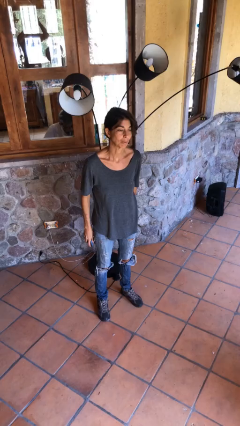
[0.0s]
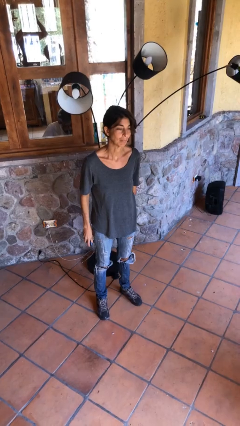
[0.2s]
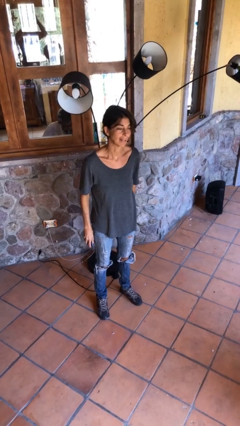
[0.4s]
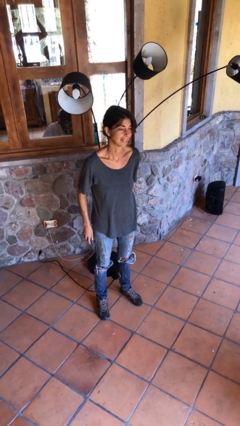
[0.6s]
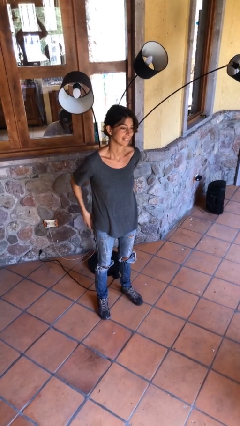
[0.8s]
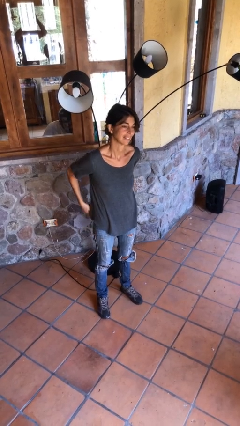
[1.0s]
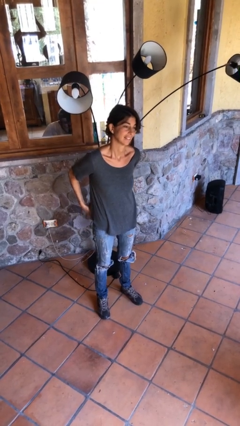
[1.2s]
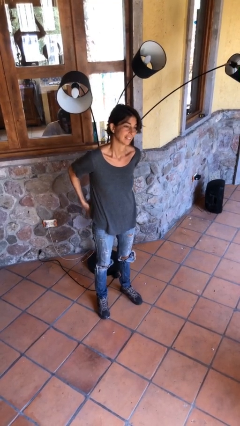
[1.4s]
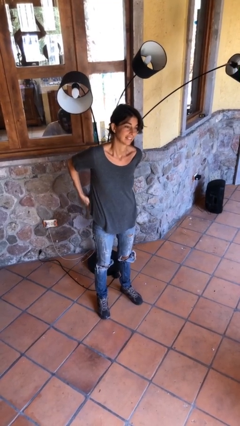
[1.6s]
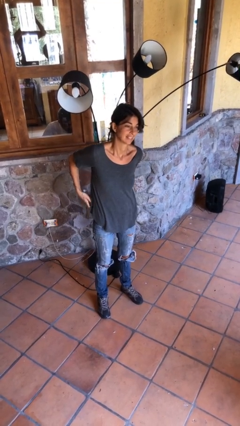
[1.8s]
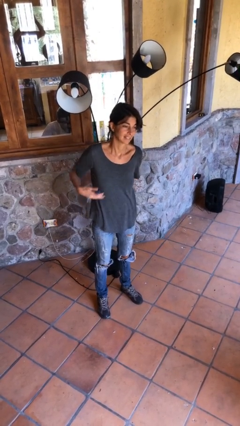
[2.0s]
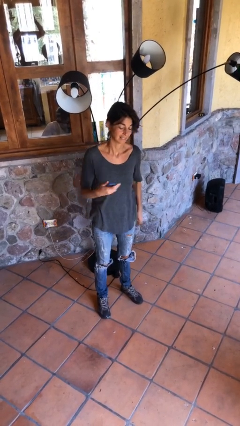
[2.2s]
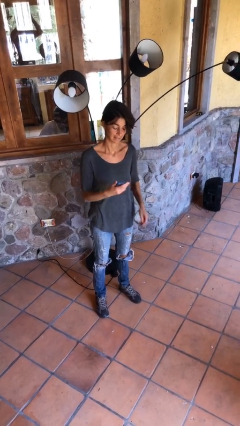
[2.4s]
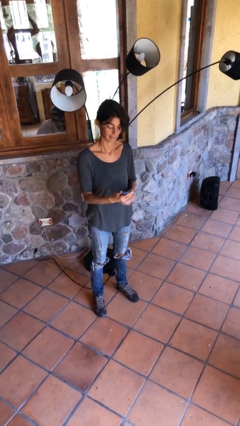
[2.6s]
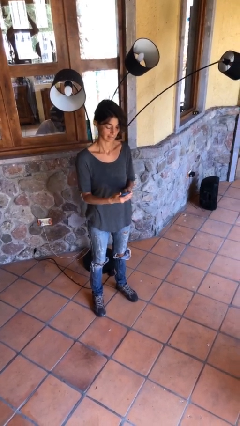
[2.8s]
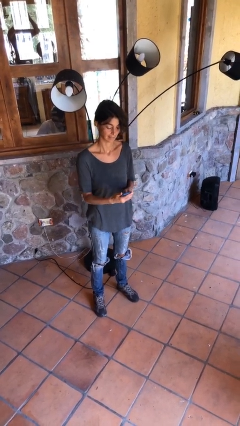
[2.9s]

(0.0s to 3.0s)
person takes phone from pocket

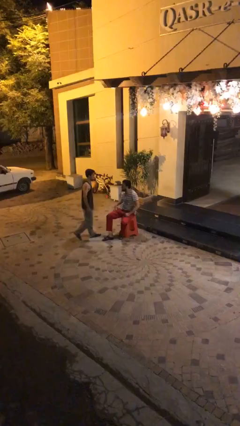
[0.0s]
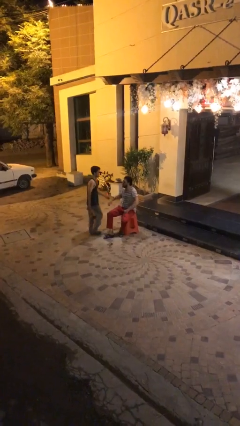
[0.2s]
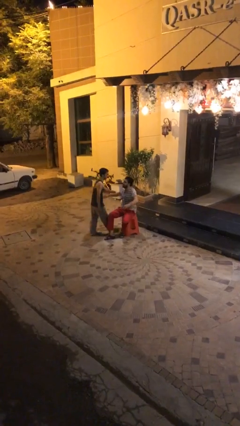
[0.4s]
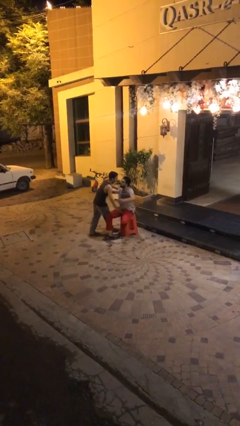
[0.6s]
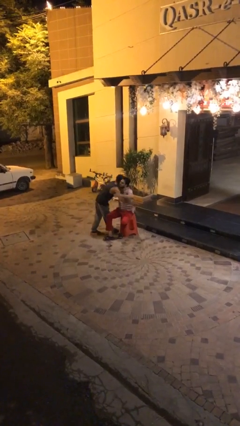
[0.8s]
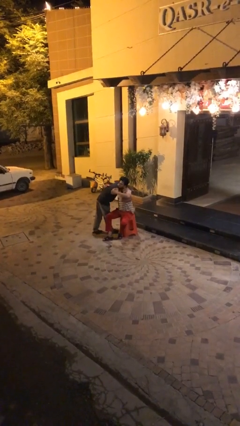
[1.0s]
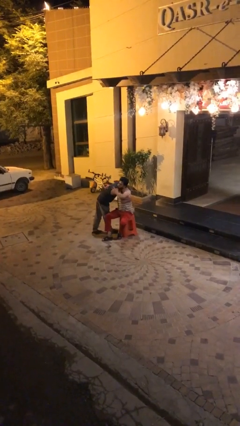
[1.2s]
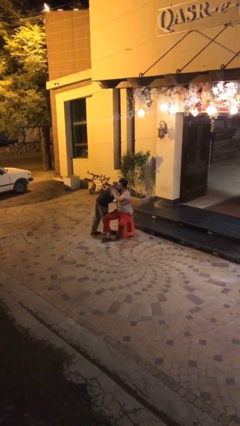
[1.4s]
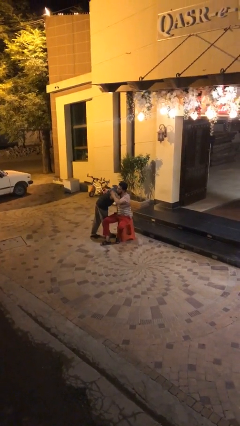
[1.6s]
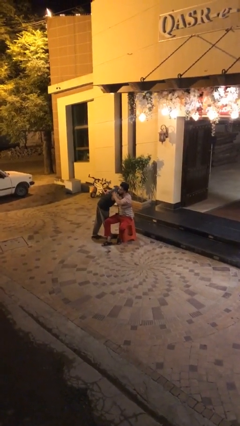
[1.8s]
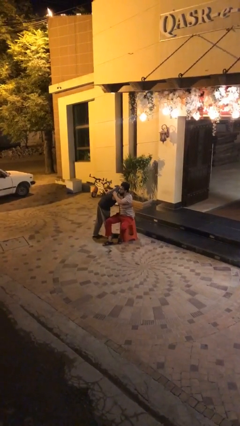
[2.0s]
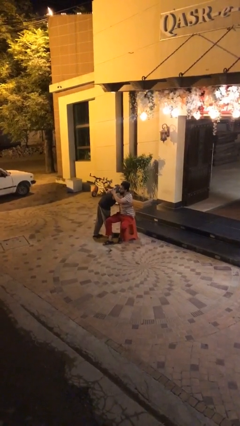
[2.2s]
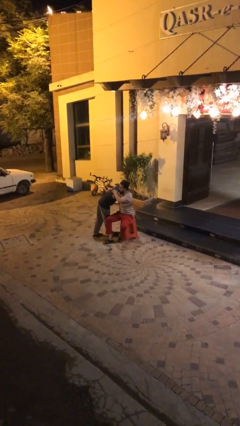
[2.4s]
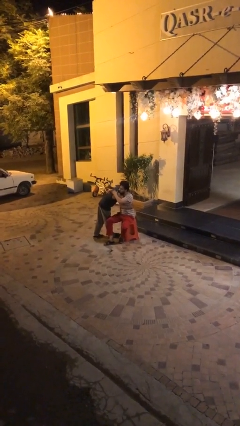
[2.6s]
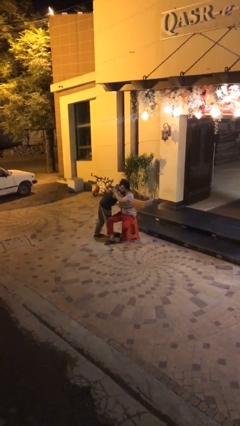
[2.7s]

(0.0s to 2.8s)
person embraces person

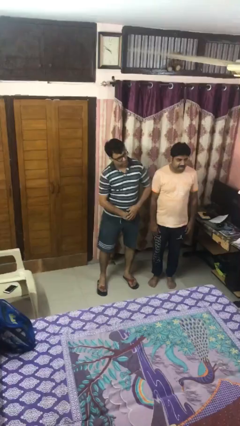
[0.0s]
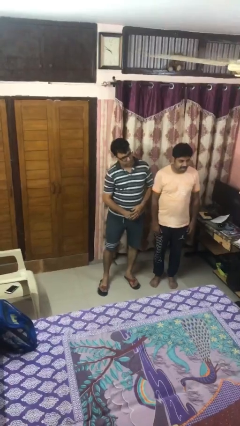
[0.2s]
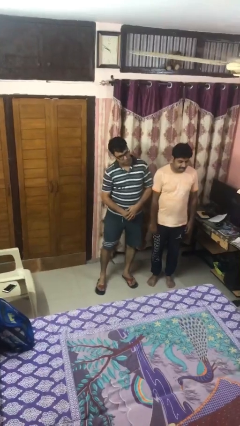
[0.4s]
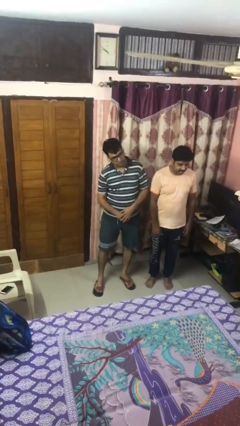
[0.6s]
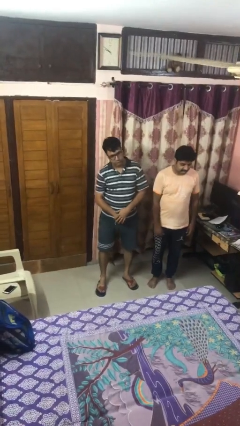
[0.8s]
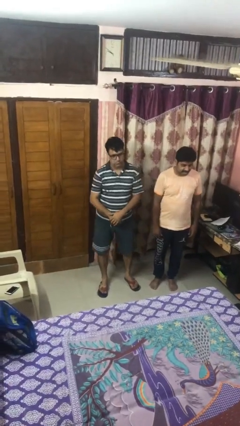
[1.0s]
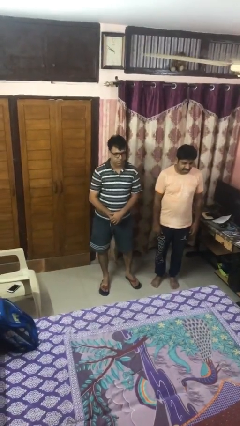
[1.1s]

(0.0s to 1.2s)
person nudges person with elbow

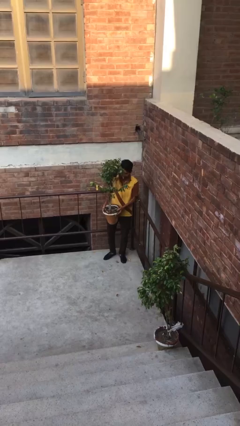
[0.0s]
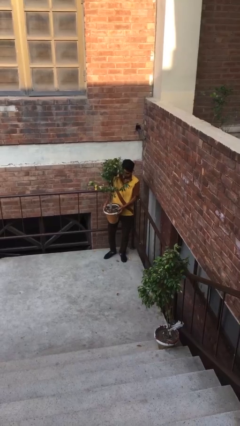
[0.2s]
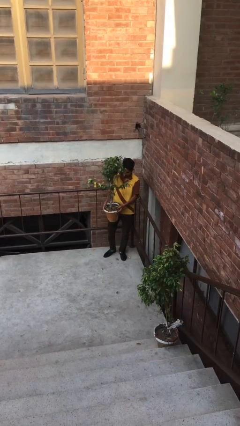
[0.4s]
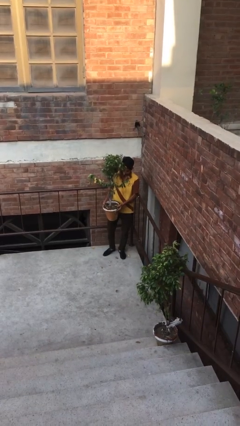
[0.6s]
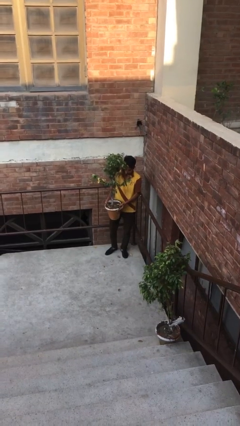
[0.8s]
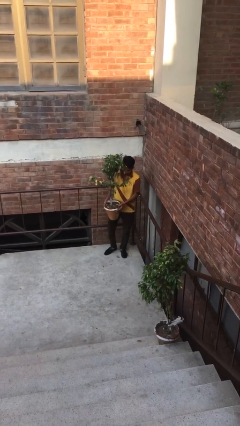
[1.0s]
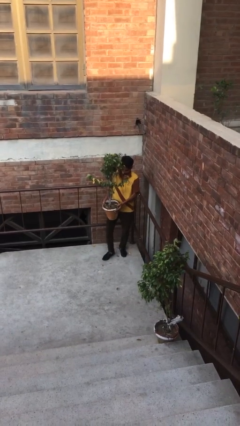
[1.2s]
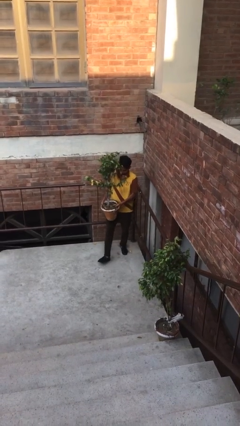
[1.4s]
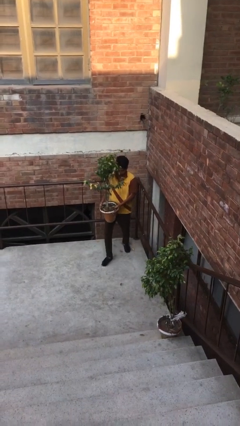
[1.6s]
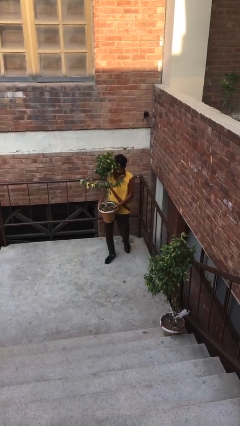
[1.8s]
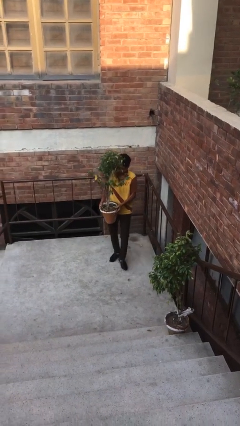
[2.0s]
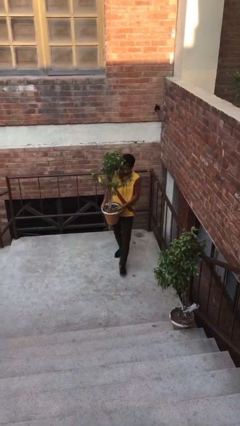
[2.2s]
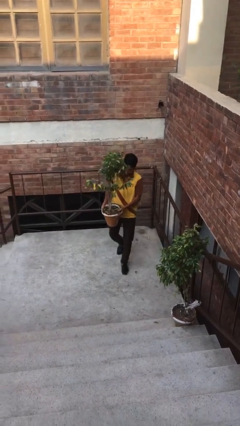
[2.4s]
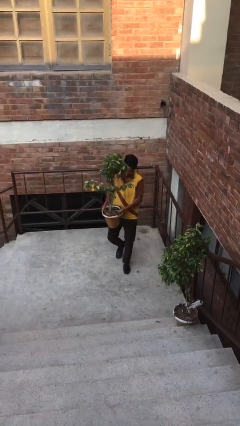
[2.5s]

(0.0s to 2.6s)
person carries heavy object

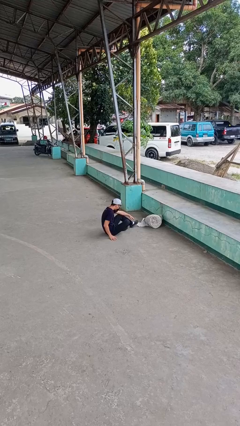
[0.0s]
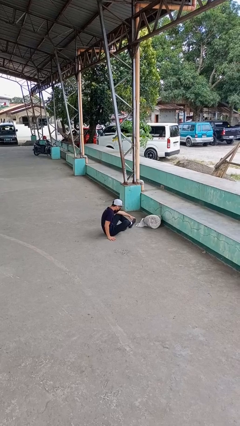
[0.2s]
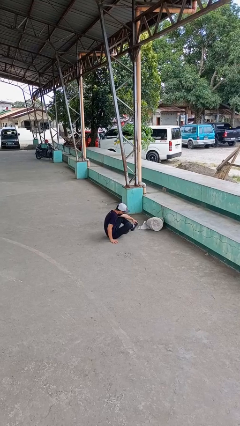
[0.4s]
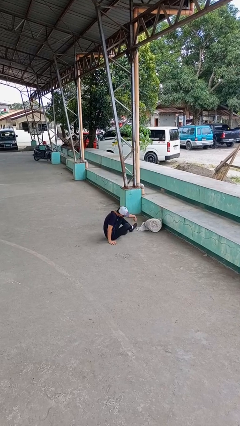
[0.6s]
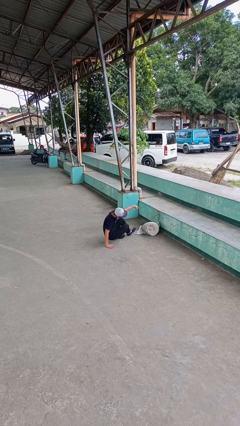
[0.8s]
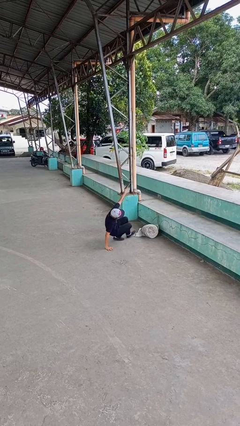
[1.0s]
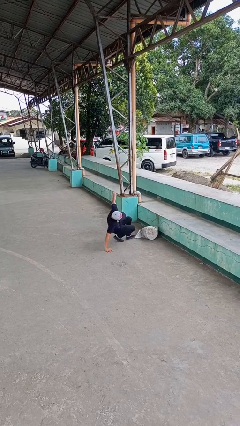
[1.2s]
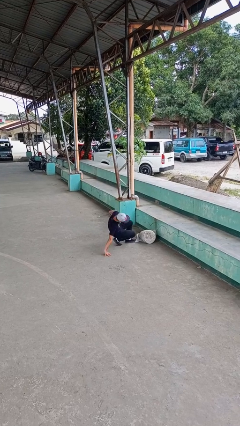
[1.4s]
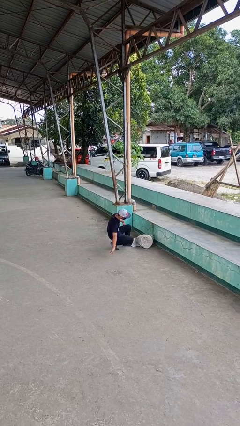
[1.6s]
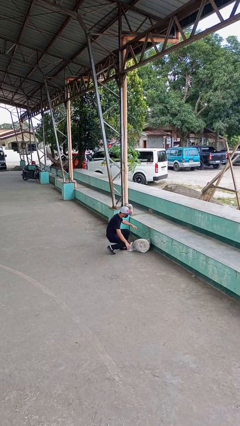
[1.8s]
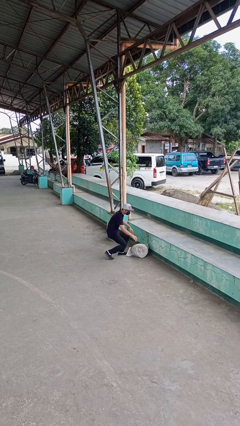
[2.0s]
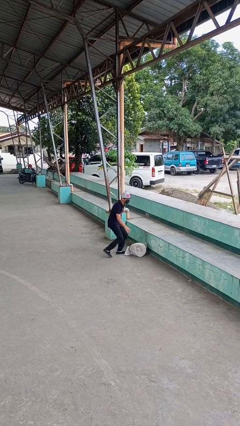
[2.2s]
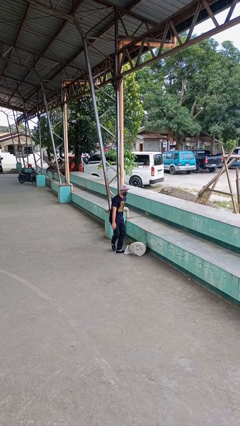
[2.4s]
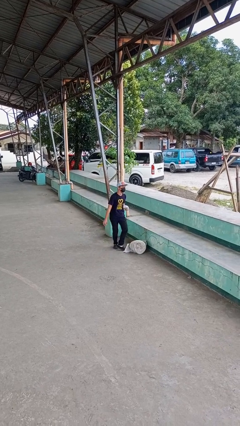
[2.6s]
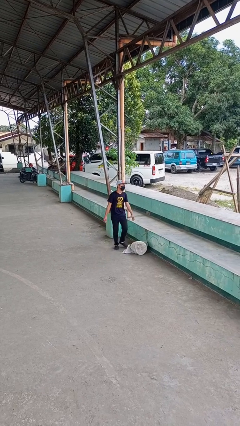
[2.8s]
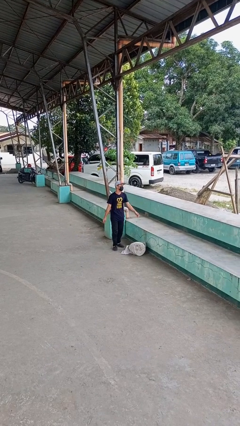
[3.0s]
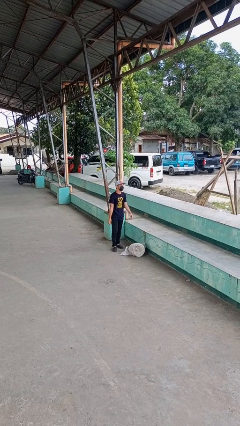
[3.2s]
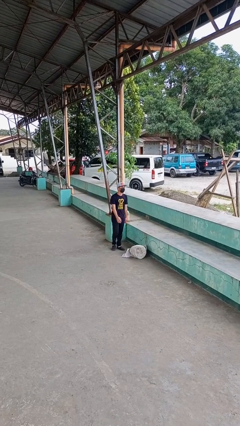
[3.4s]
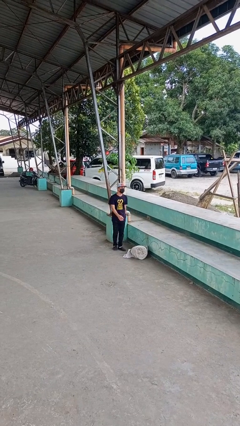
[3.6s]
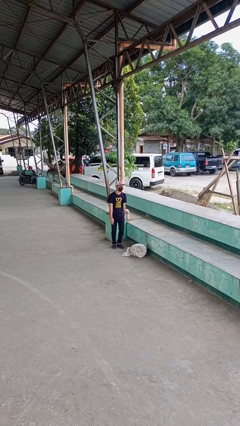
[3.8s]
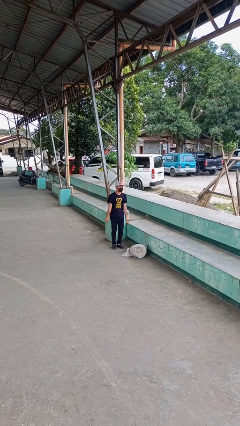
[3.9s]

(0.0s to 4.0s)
person stands up from floor

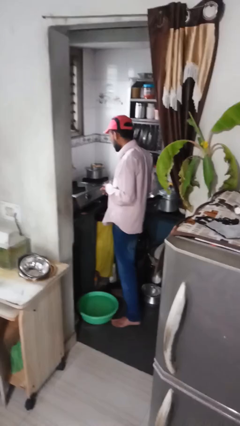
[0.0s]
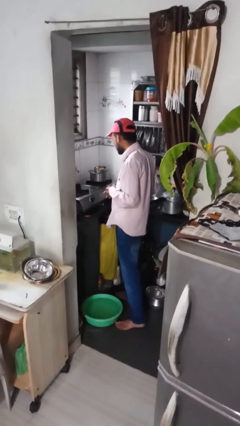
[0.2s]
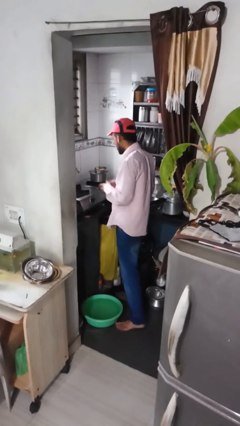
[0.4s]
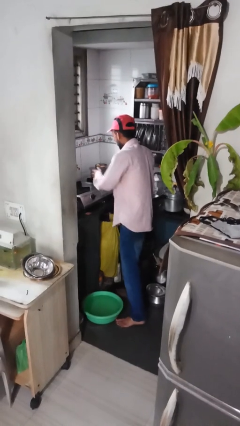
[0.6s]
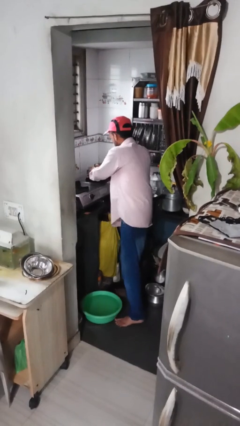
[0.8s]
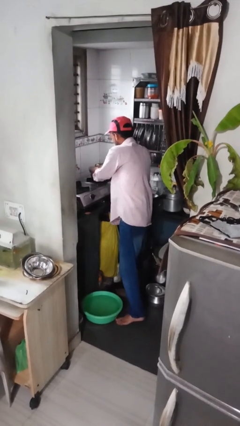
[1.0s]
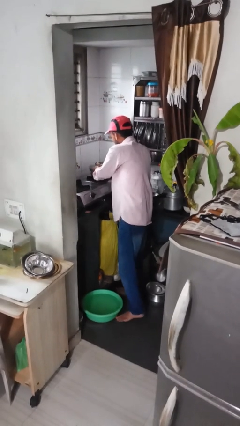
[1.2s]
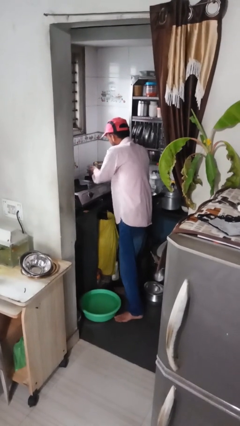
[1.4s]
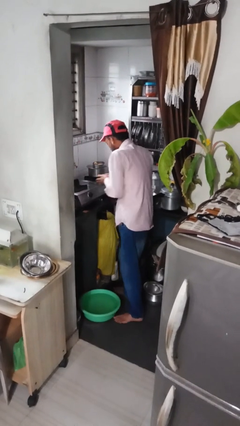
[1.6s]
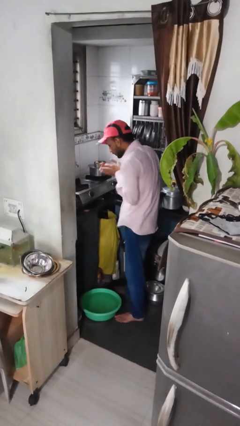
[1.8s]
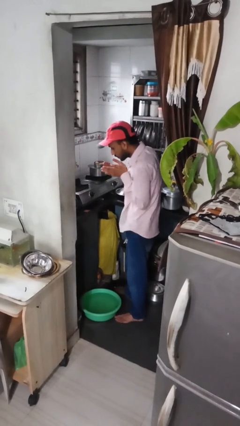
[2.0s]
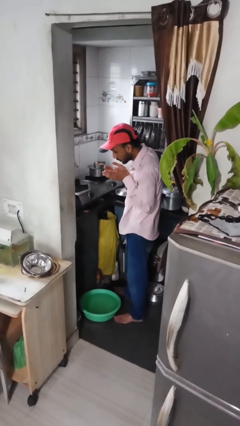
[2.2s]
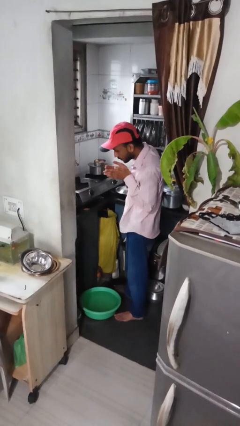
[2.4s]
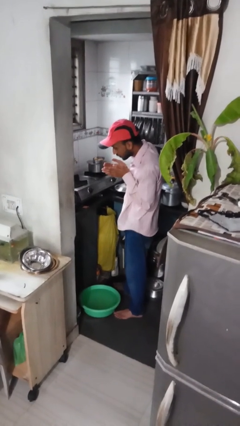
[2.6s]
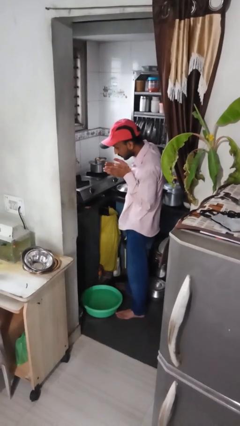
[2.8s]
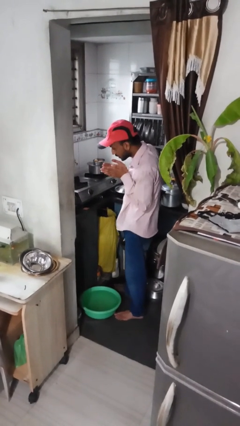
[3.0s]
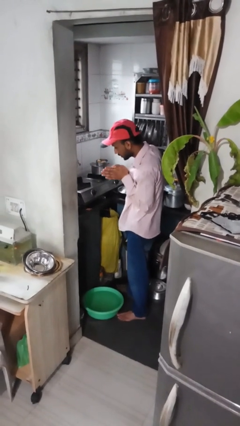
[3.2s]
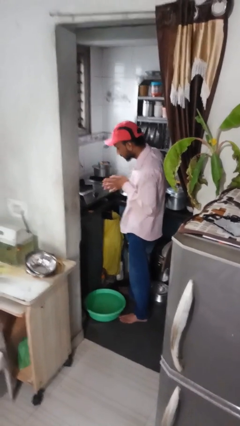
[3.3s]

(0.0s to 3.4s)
person burns hand
